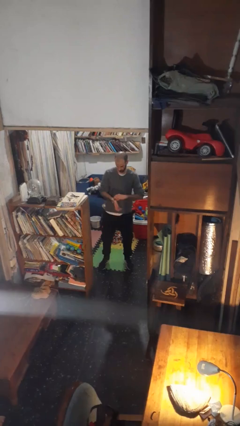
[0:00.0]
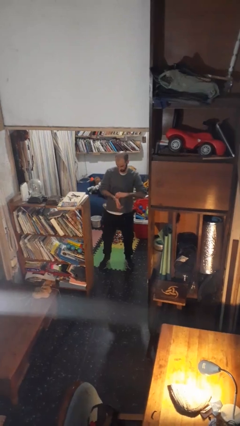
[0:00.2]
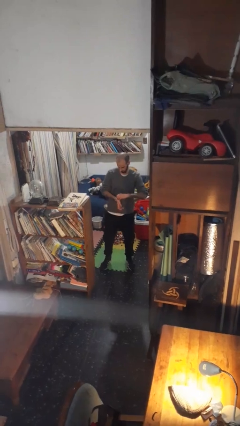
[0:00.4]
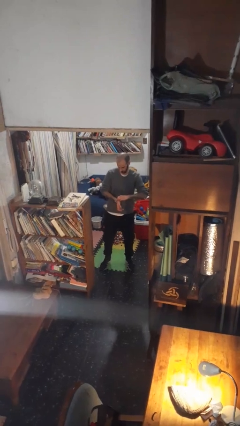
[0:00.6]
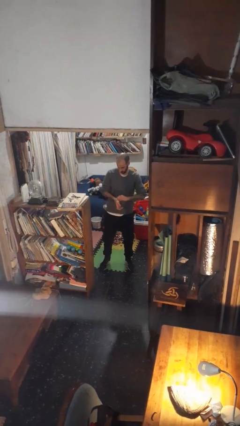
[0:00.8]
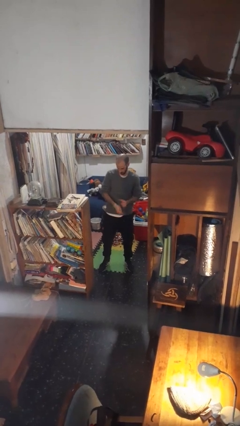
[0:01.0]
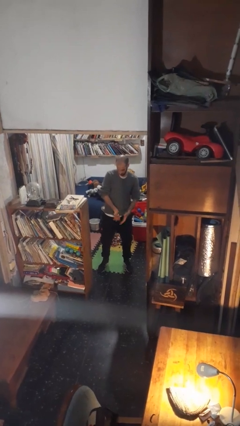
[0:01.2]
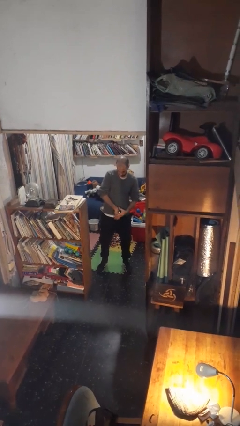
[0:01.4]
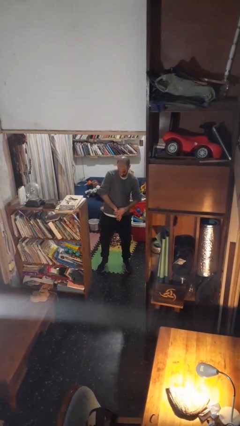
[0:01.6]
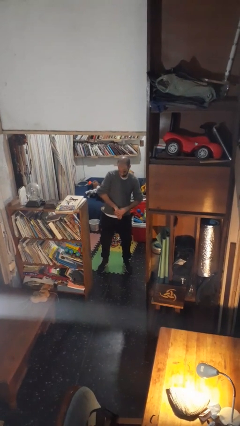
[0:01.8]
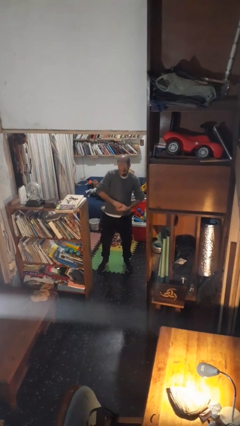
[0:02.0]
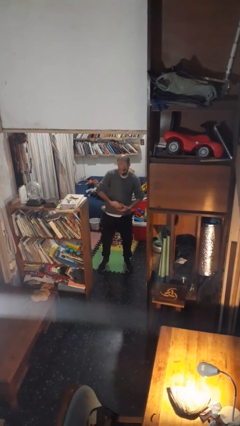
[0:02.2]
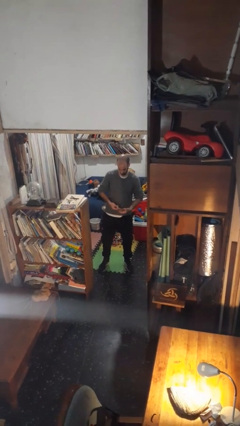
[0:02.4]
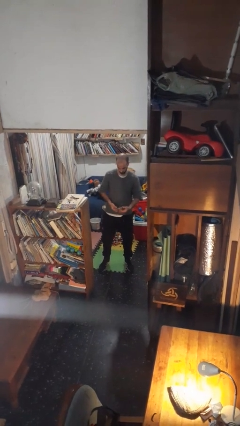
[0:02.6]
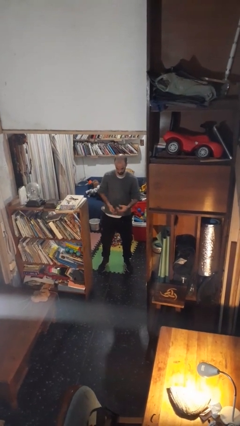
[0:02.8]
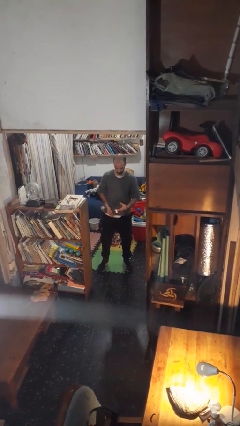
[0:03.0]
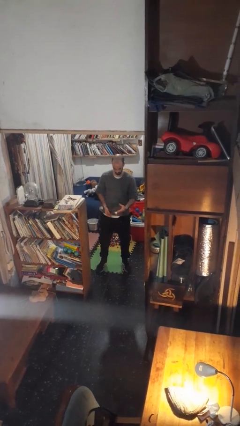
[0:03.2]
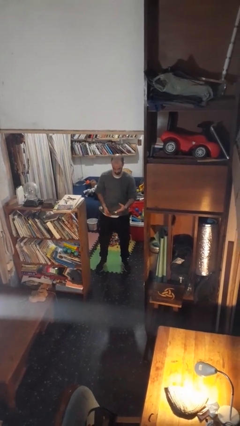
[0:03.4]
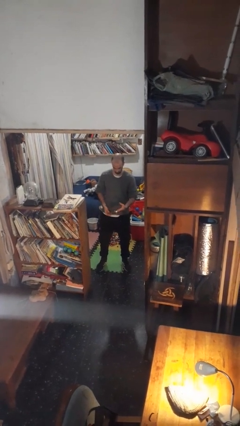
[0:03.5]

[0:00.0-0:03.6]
person takes off wristwatch

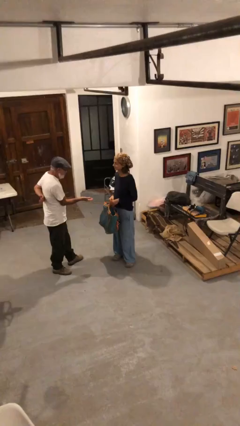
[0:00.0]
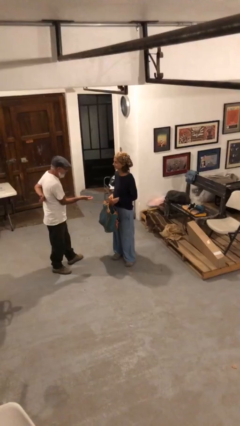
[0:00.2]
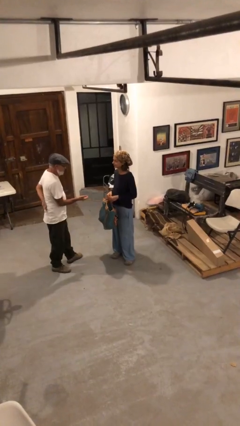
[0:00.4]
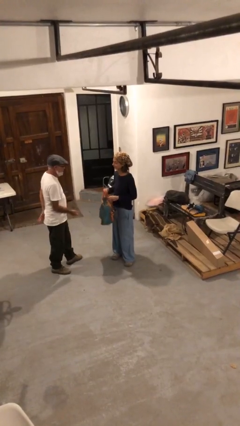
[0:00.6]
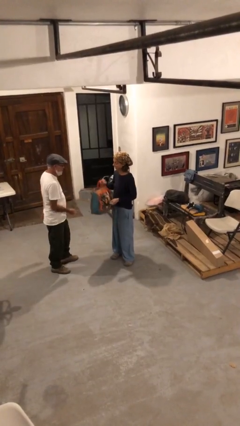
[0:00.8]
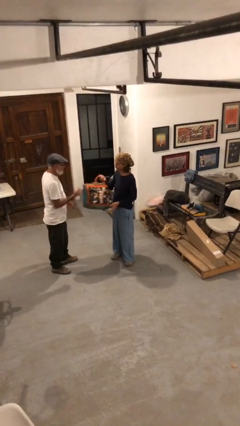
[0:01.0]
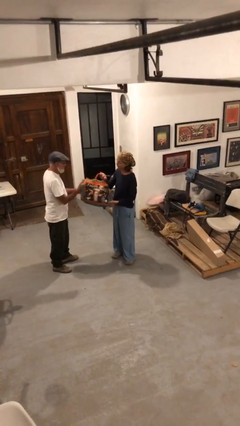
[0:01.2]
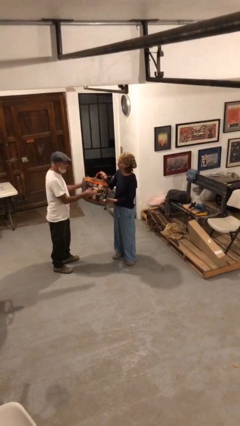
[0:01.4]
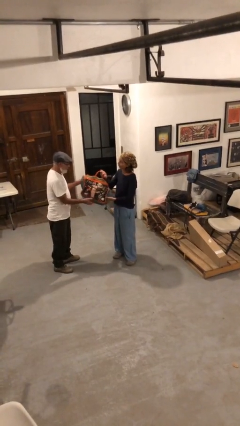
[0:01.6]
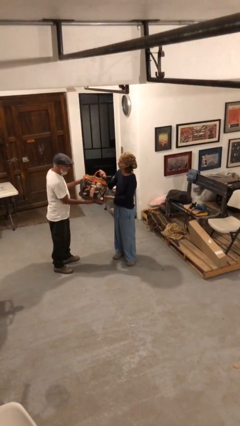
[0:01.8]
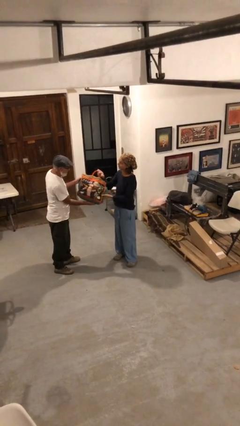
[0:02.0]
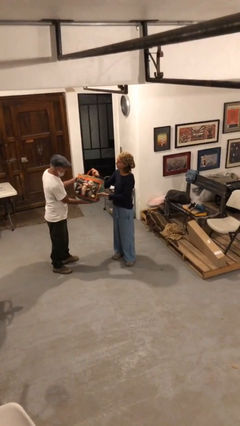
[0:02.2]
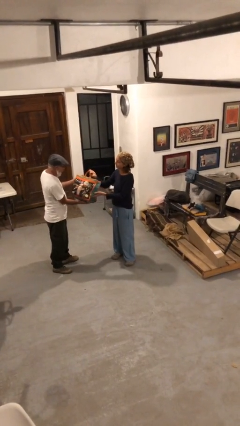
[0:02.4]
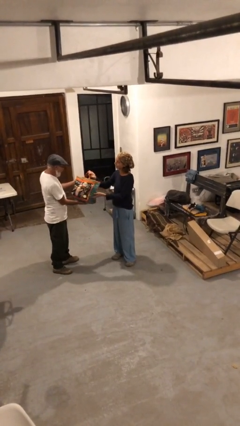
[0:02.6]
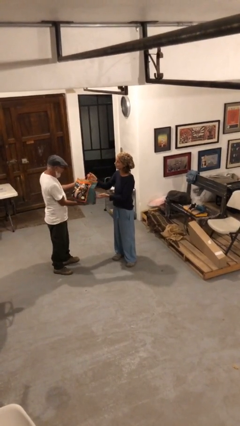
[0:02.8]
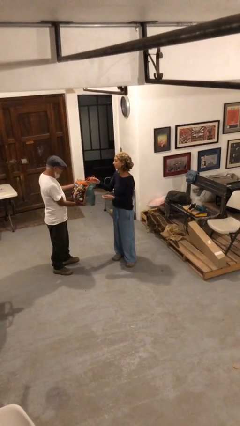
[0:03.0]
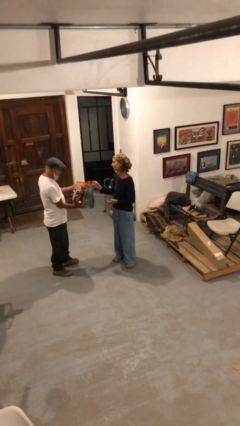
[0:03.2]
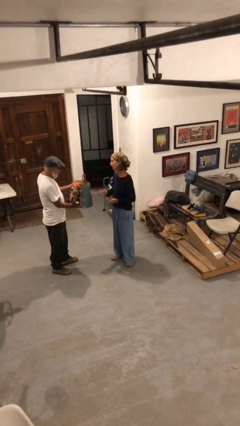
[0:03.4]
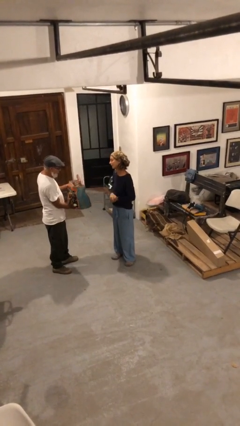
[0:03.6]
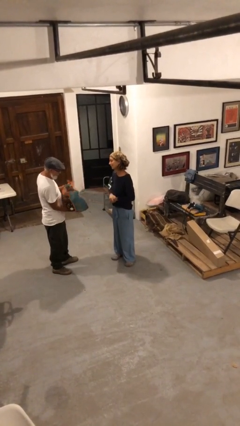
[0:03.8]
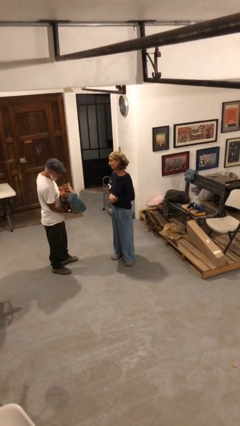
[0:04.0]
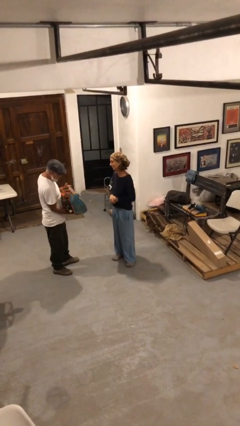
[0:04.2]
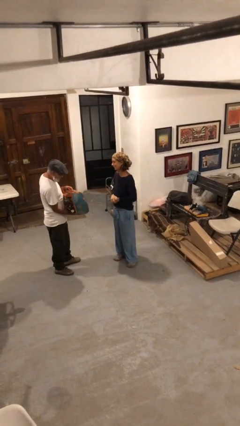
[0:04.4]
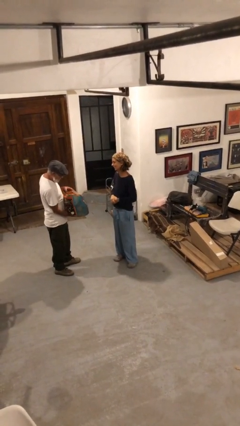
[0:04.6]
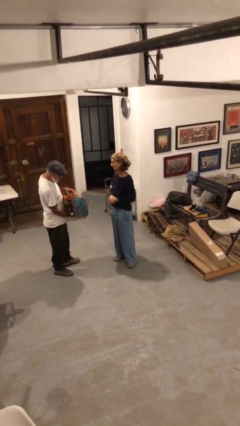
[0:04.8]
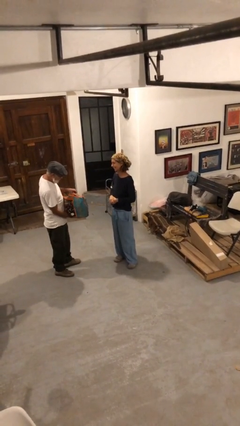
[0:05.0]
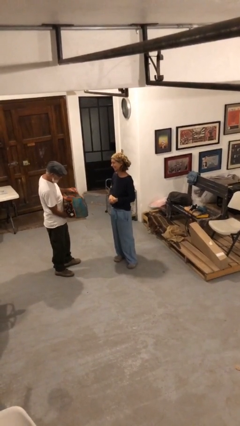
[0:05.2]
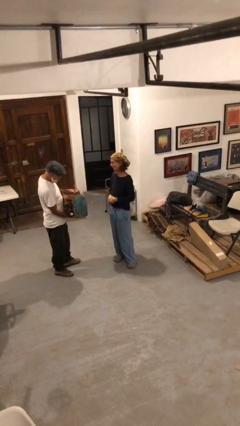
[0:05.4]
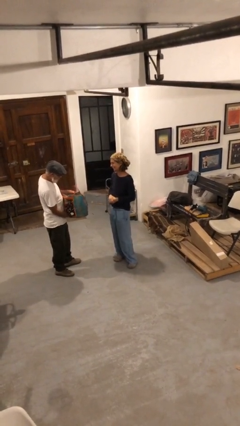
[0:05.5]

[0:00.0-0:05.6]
person transfers object to person

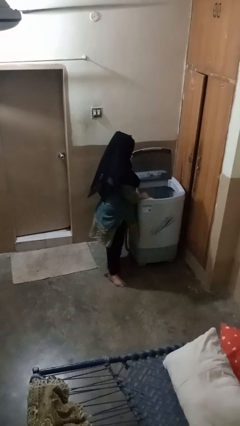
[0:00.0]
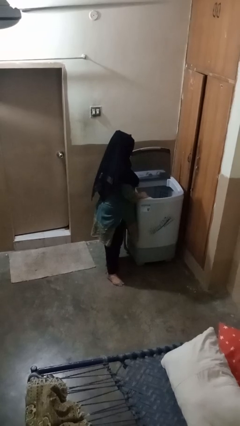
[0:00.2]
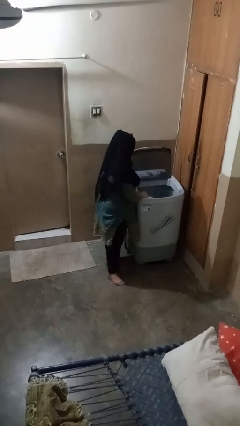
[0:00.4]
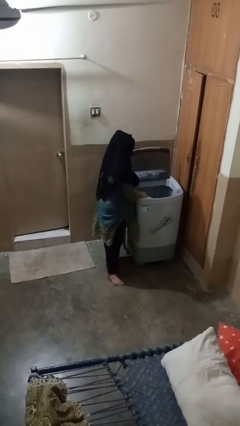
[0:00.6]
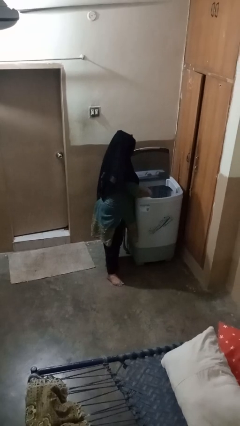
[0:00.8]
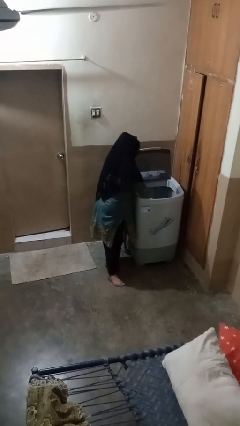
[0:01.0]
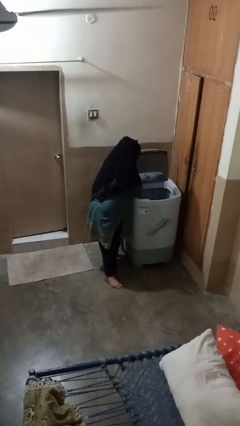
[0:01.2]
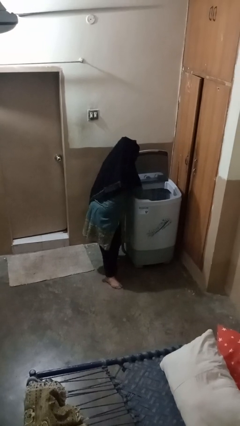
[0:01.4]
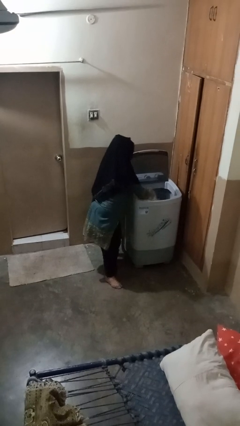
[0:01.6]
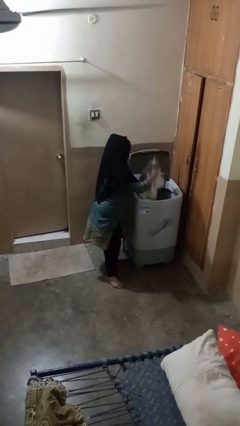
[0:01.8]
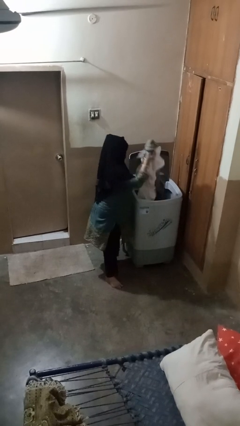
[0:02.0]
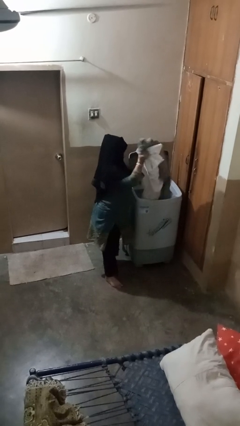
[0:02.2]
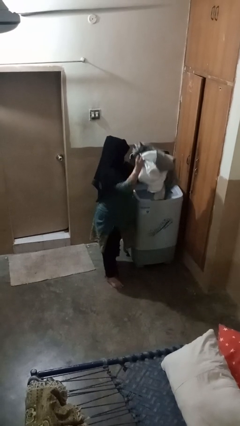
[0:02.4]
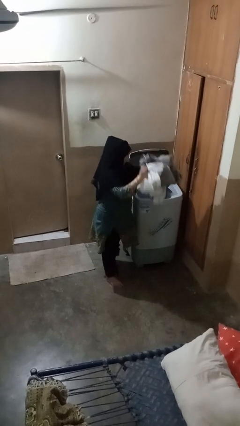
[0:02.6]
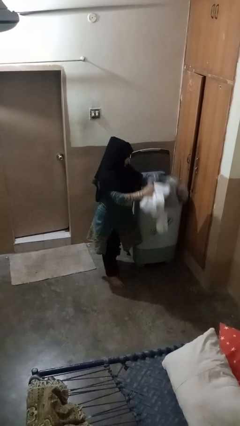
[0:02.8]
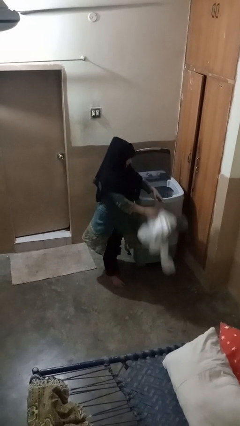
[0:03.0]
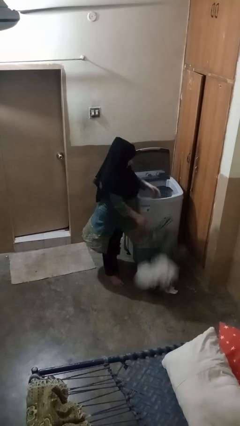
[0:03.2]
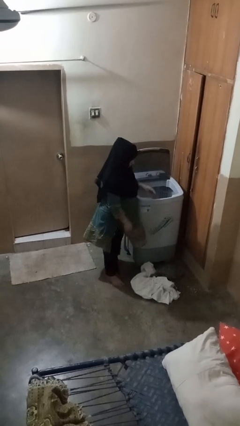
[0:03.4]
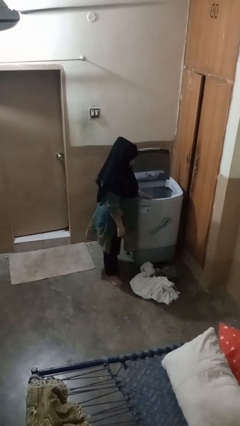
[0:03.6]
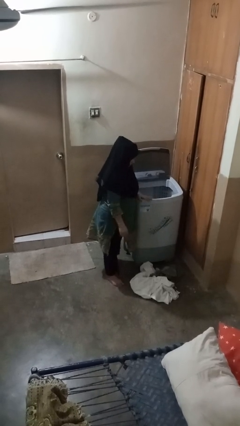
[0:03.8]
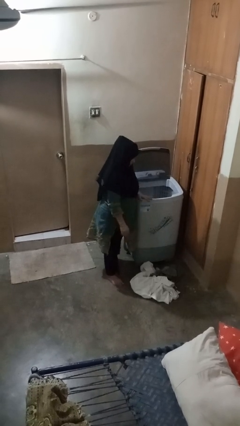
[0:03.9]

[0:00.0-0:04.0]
person unloads clotheswasher

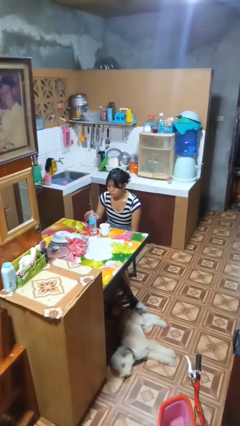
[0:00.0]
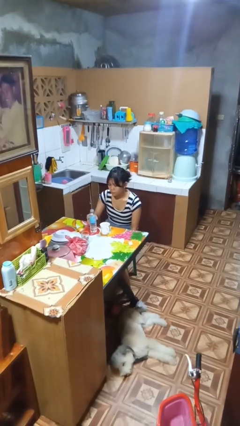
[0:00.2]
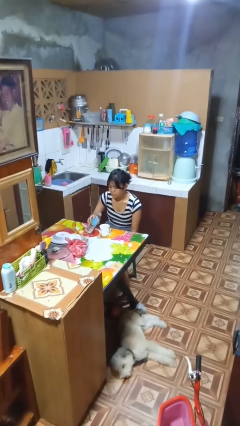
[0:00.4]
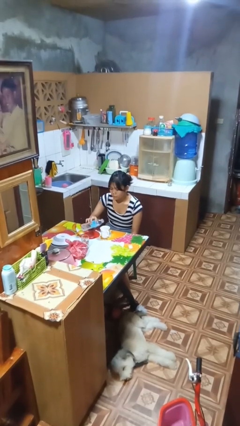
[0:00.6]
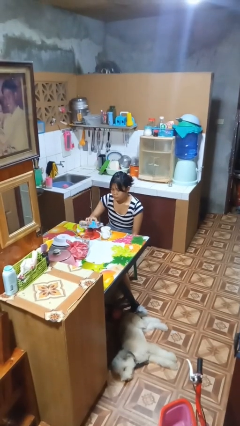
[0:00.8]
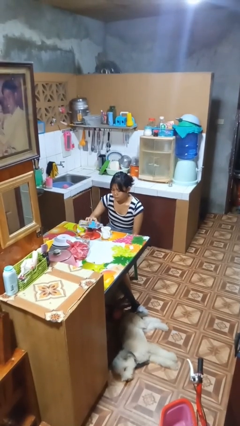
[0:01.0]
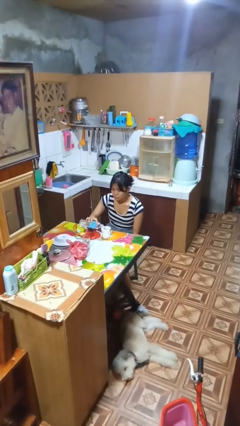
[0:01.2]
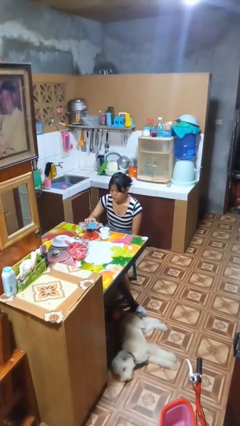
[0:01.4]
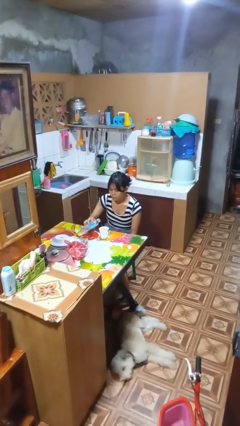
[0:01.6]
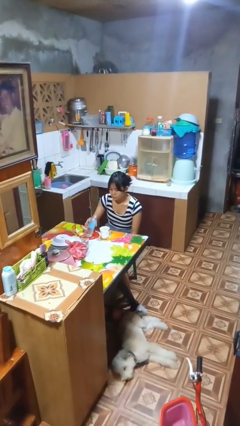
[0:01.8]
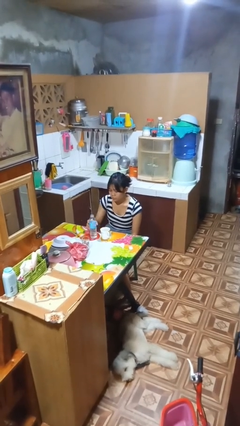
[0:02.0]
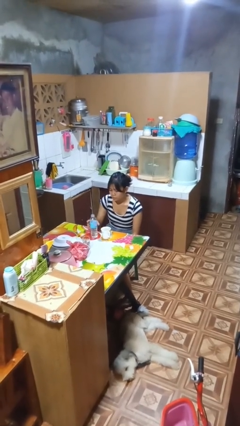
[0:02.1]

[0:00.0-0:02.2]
person pours liquid into cup

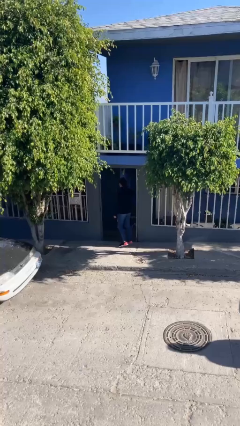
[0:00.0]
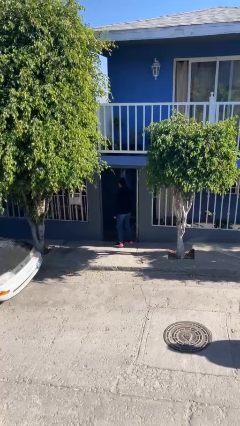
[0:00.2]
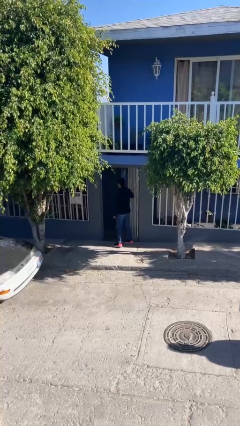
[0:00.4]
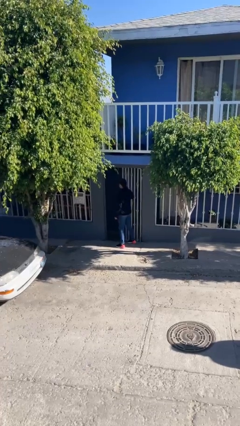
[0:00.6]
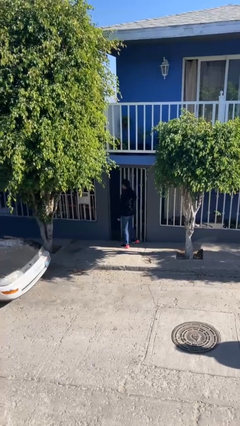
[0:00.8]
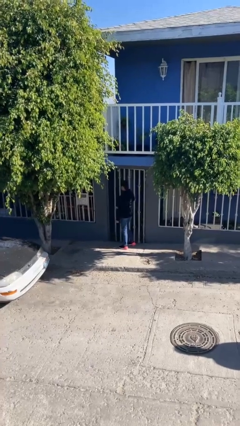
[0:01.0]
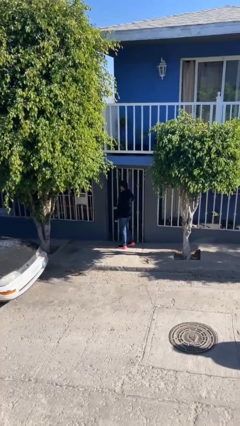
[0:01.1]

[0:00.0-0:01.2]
person closes facility door

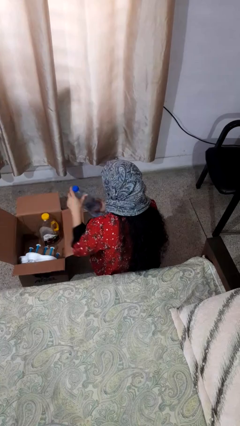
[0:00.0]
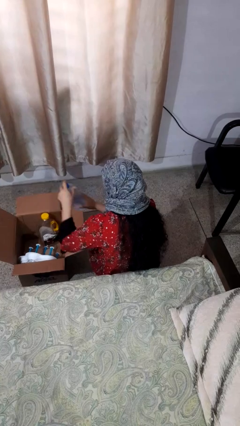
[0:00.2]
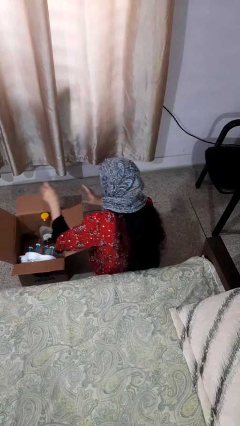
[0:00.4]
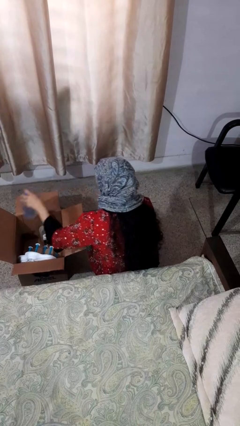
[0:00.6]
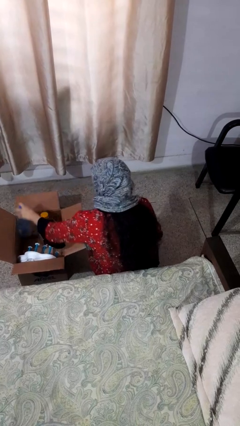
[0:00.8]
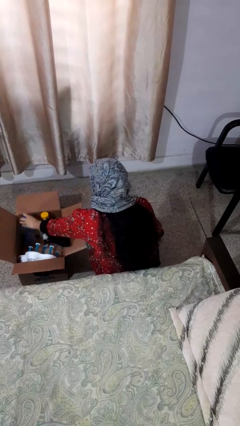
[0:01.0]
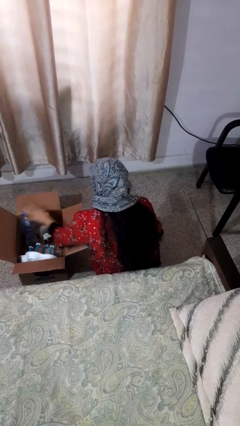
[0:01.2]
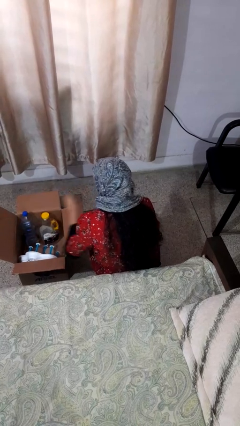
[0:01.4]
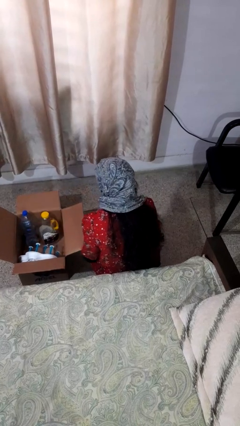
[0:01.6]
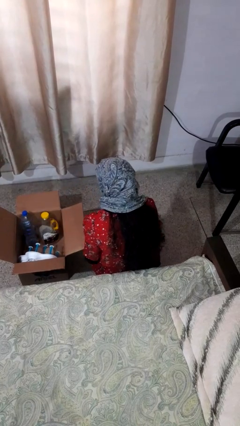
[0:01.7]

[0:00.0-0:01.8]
person puts object into box
